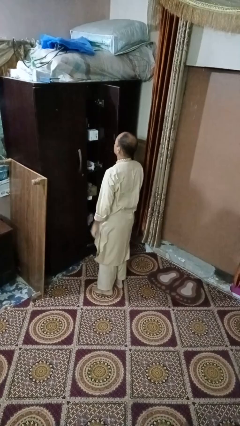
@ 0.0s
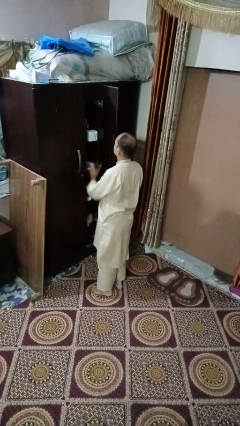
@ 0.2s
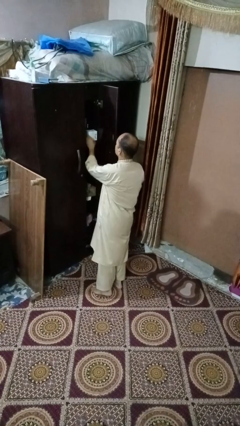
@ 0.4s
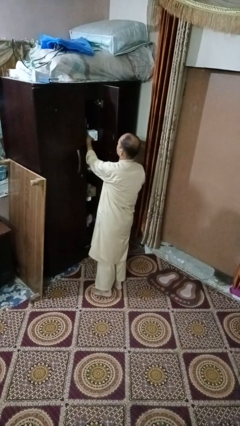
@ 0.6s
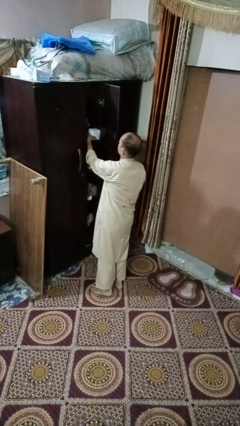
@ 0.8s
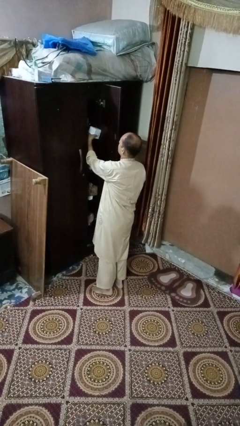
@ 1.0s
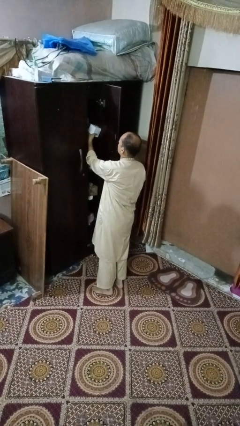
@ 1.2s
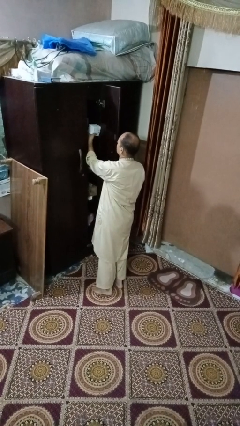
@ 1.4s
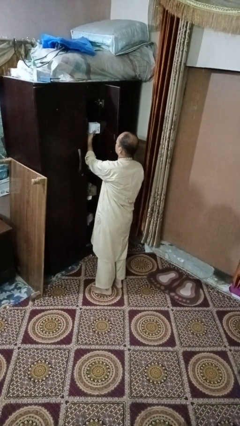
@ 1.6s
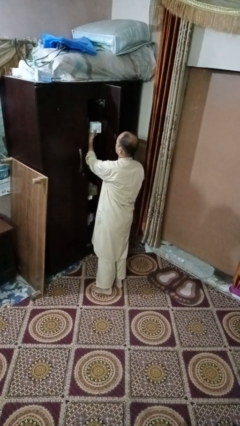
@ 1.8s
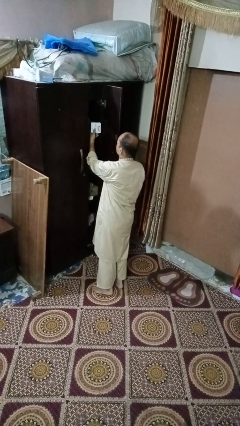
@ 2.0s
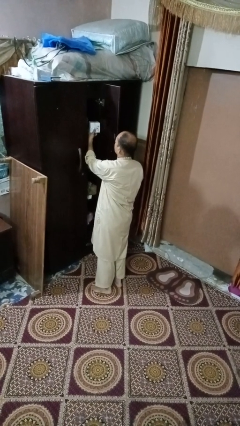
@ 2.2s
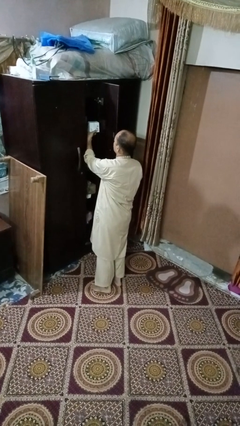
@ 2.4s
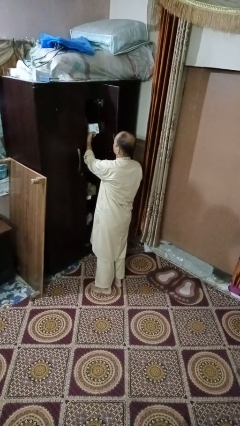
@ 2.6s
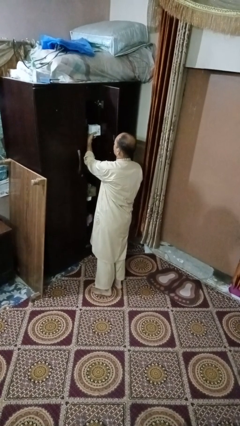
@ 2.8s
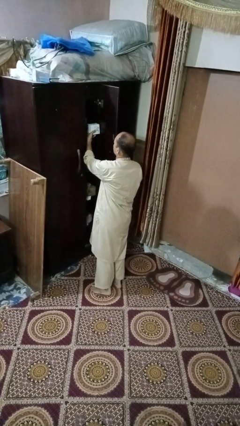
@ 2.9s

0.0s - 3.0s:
person picks up object from cabinet

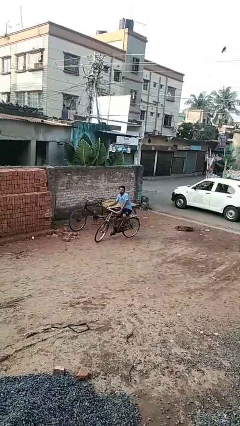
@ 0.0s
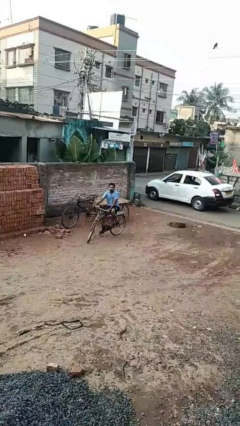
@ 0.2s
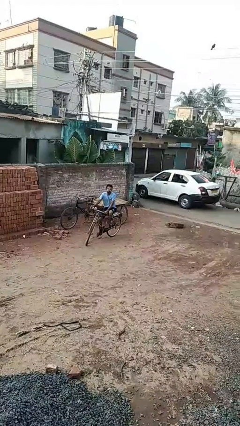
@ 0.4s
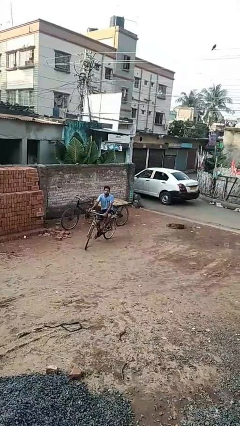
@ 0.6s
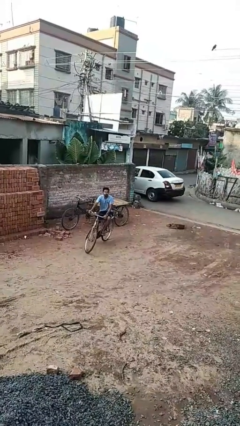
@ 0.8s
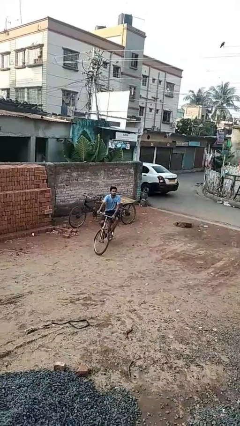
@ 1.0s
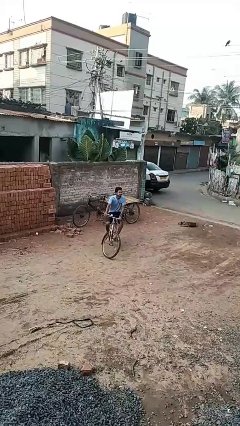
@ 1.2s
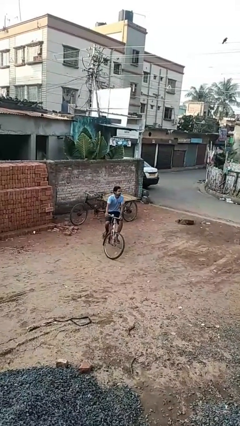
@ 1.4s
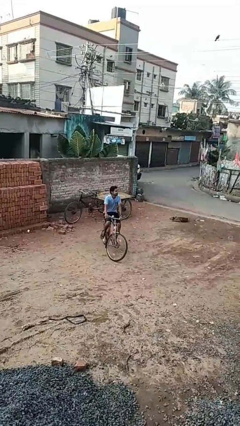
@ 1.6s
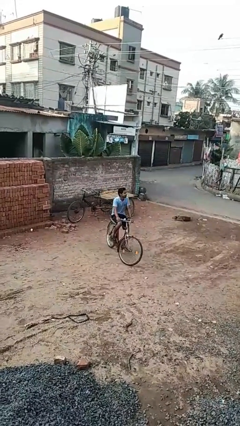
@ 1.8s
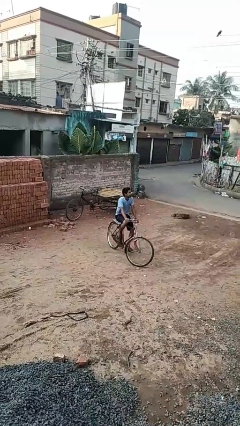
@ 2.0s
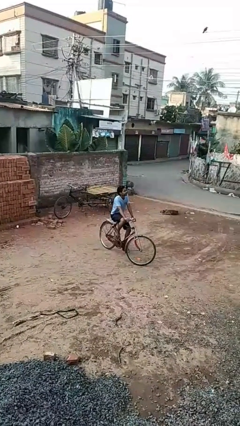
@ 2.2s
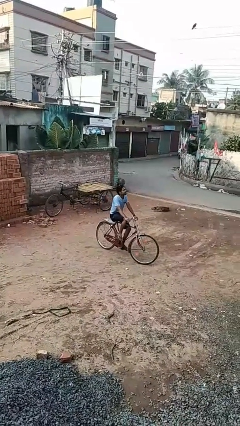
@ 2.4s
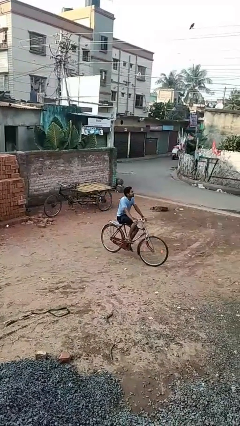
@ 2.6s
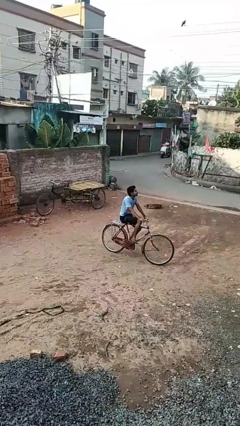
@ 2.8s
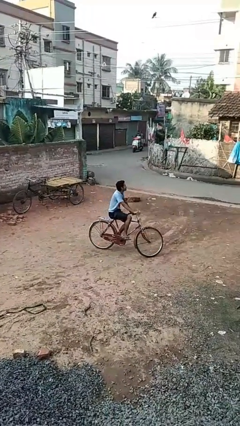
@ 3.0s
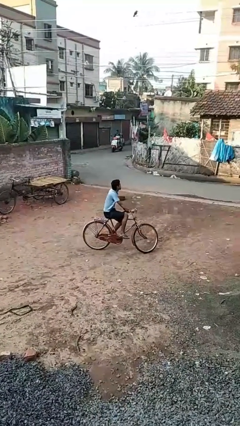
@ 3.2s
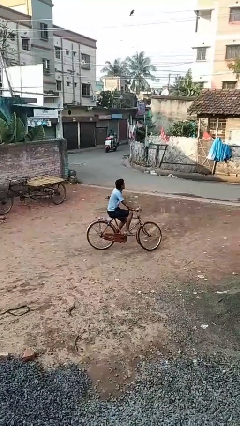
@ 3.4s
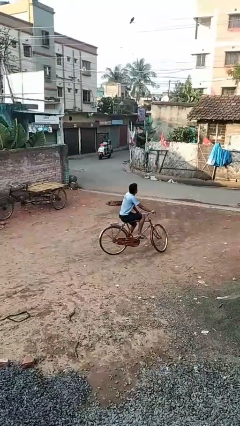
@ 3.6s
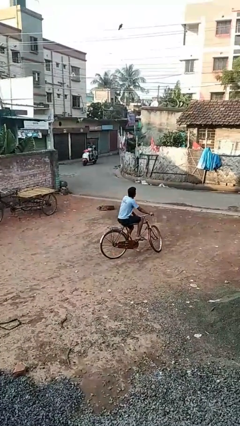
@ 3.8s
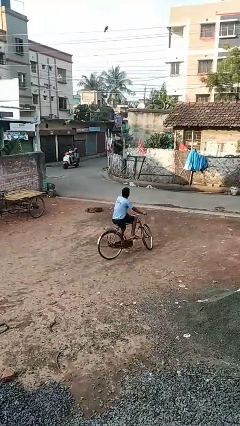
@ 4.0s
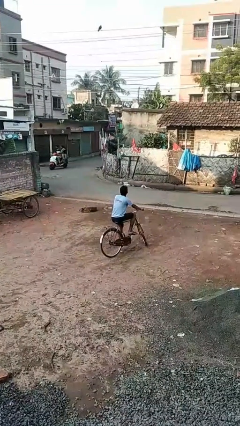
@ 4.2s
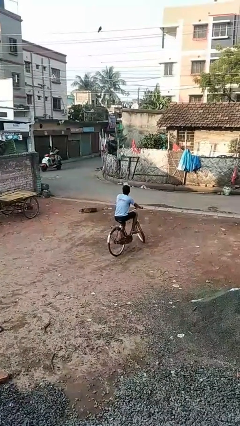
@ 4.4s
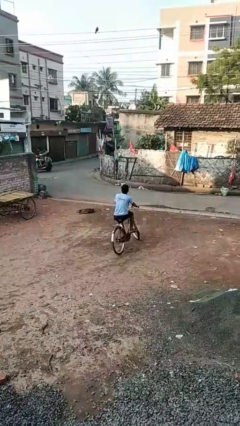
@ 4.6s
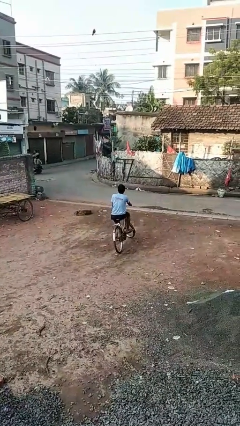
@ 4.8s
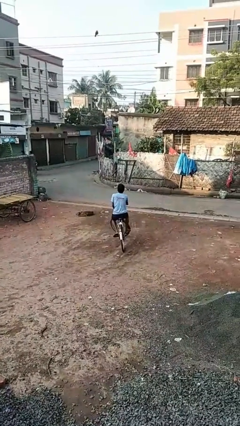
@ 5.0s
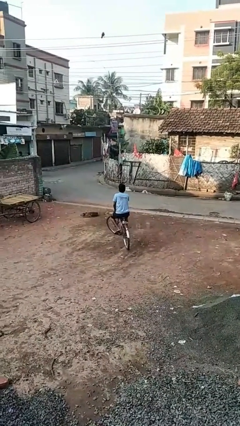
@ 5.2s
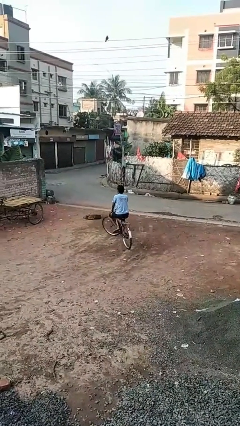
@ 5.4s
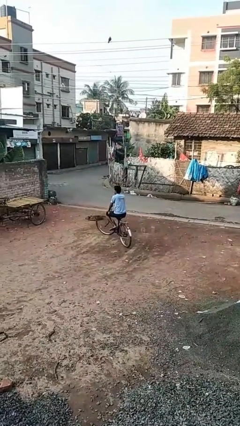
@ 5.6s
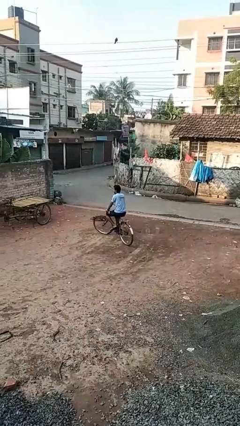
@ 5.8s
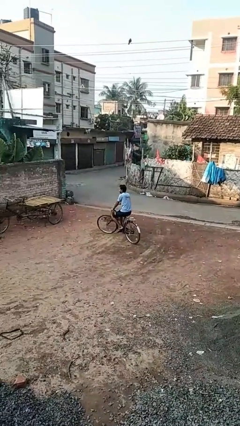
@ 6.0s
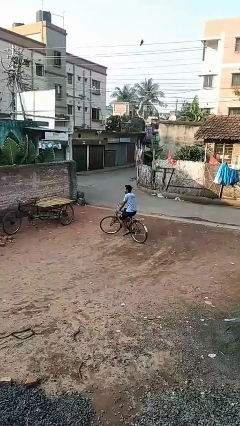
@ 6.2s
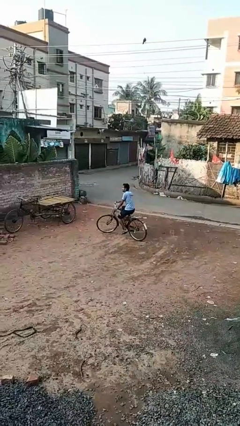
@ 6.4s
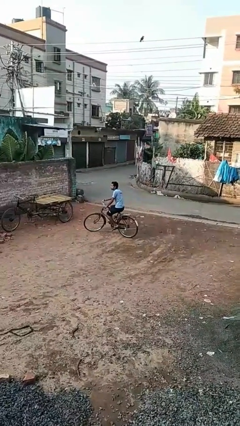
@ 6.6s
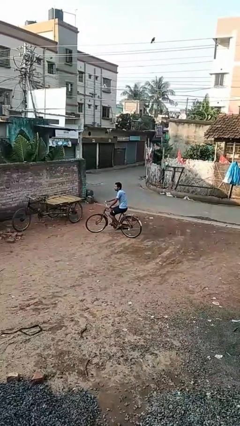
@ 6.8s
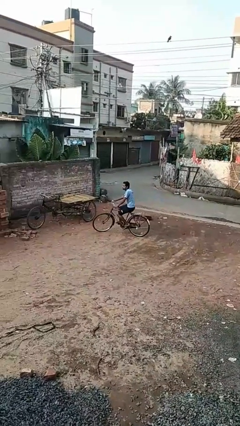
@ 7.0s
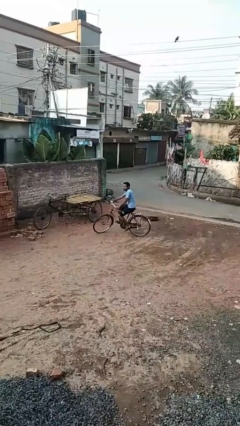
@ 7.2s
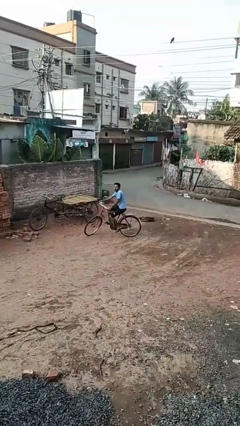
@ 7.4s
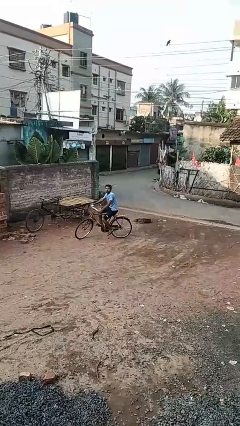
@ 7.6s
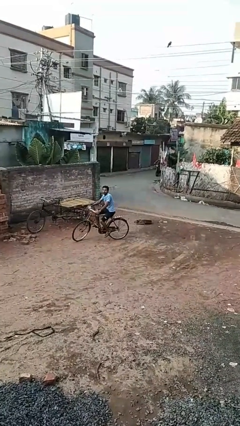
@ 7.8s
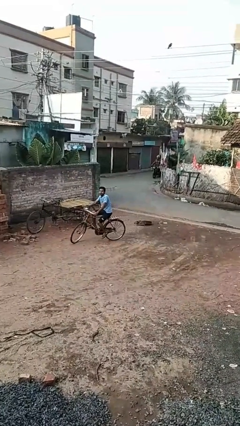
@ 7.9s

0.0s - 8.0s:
person rides bicycle

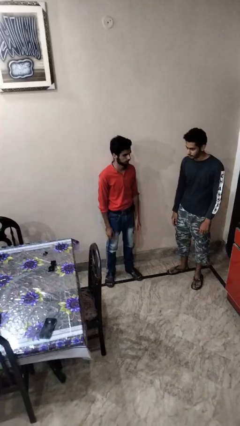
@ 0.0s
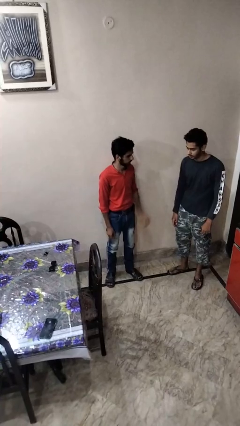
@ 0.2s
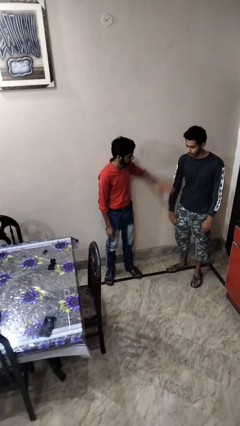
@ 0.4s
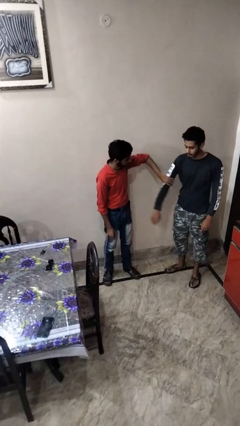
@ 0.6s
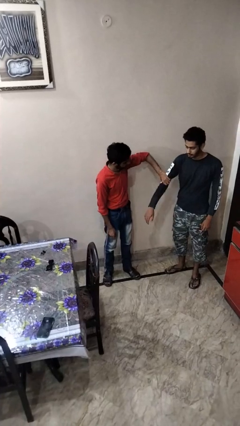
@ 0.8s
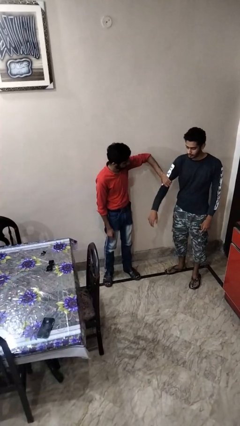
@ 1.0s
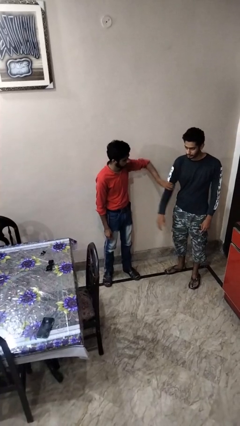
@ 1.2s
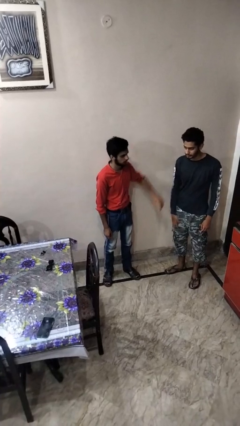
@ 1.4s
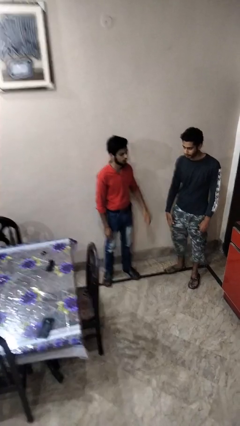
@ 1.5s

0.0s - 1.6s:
person grabs person by bicep

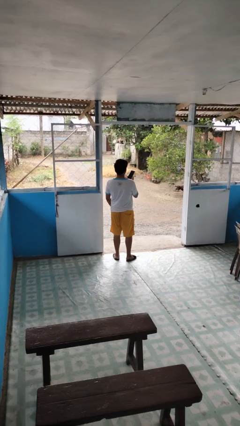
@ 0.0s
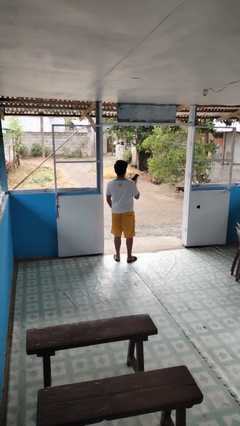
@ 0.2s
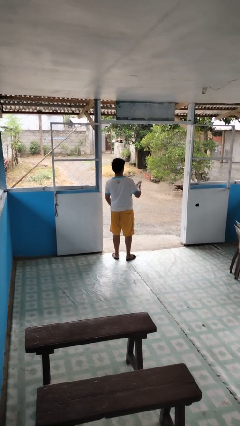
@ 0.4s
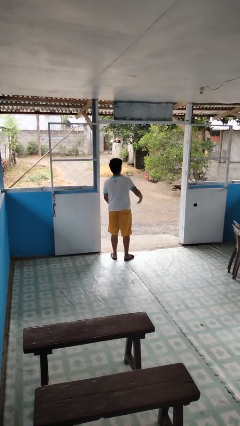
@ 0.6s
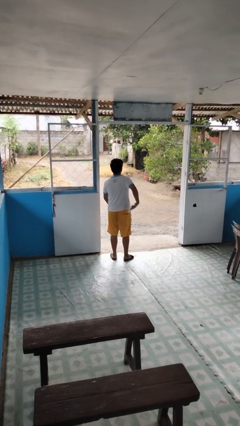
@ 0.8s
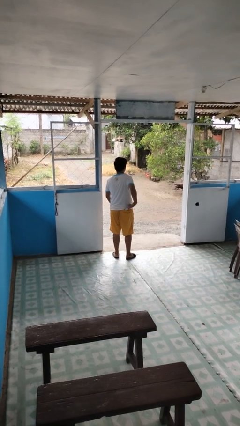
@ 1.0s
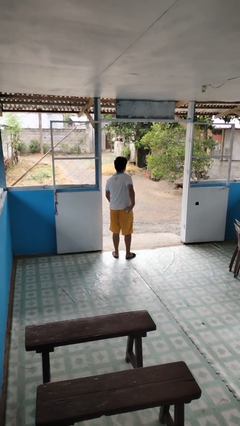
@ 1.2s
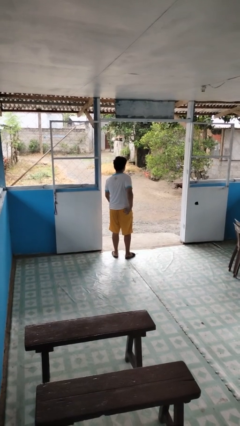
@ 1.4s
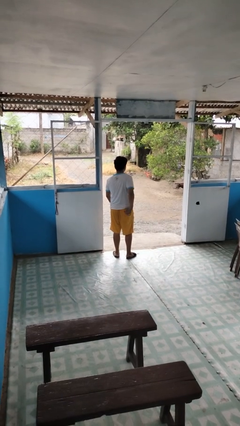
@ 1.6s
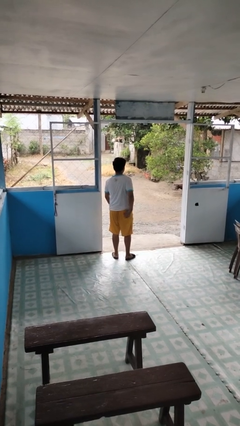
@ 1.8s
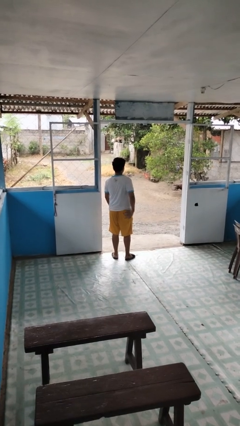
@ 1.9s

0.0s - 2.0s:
person puts phone into pocket

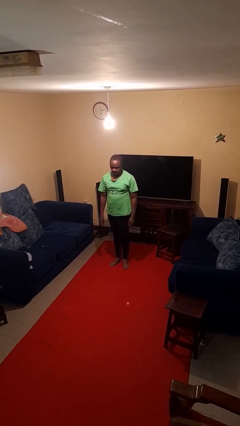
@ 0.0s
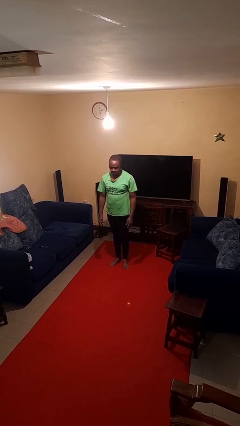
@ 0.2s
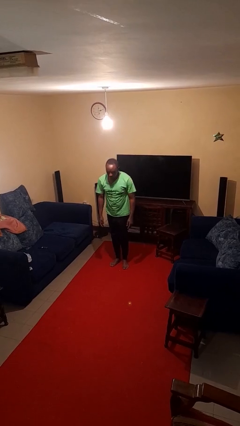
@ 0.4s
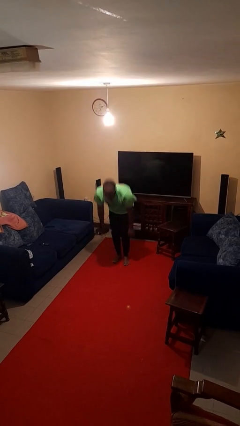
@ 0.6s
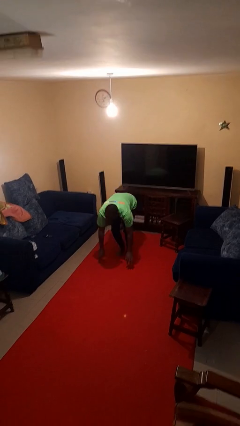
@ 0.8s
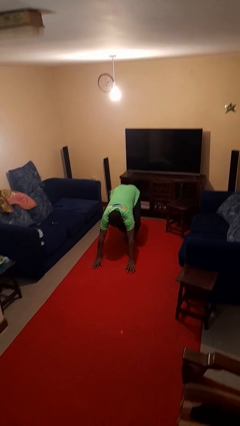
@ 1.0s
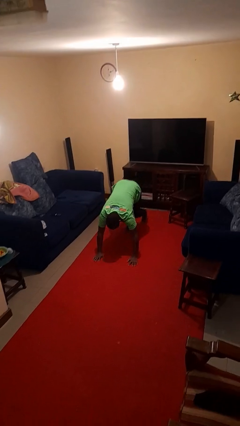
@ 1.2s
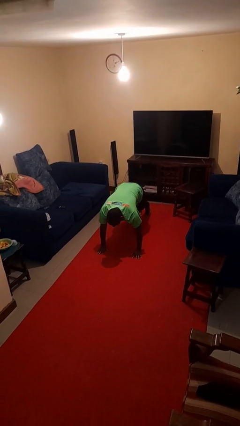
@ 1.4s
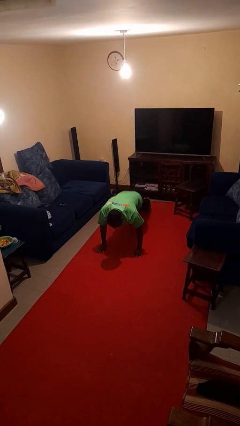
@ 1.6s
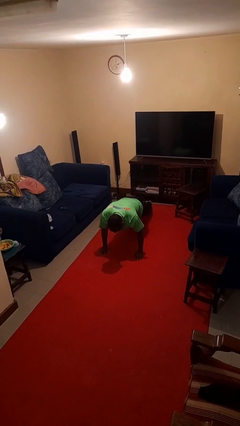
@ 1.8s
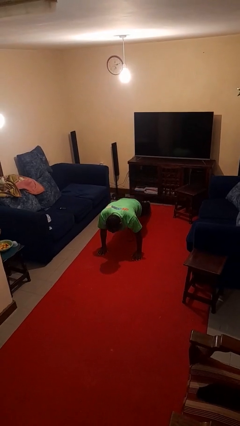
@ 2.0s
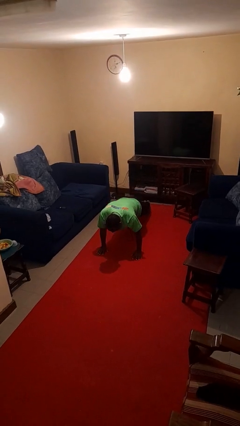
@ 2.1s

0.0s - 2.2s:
person exercises with plank

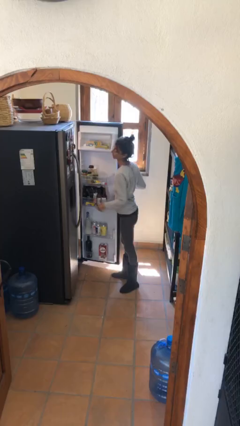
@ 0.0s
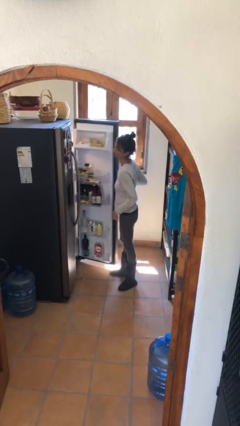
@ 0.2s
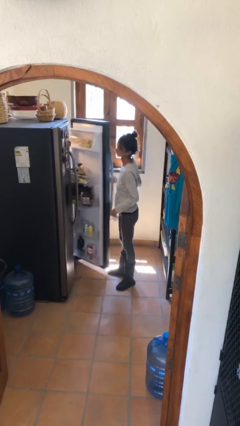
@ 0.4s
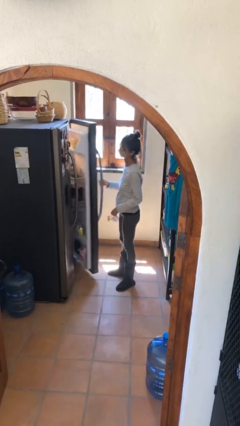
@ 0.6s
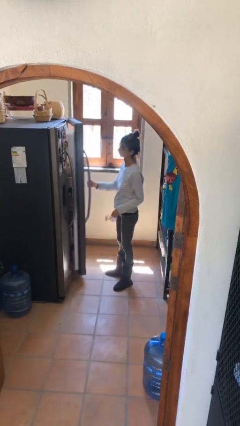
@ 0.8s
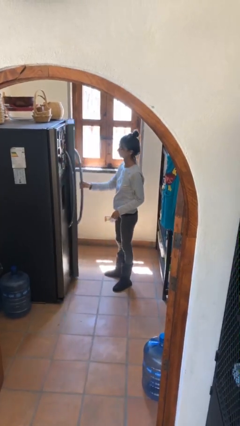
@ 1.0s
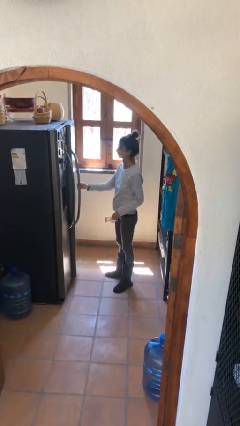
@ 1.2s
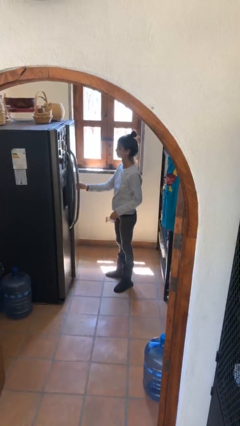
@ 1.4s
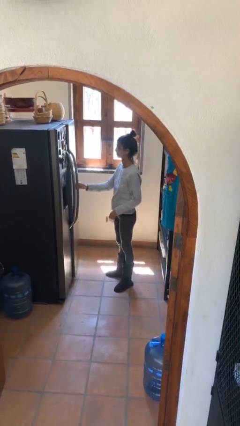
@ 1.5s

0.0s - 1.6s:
person closes refrigerator
